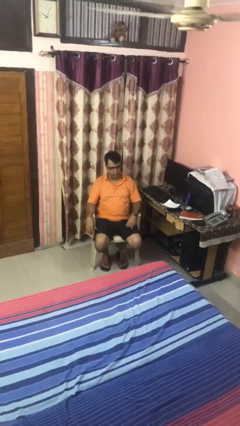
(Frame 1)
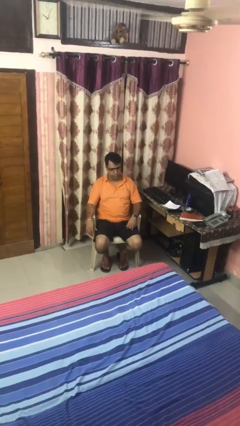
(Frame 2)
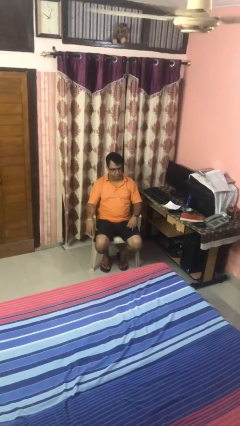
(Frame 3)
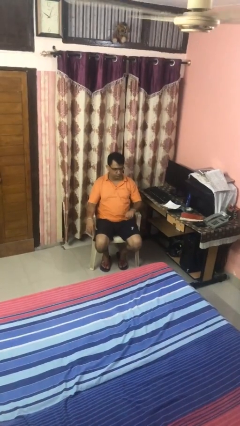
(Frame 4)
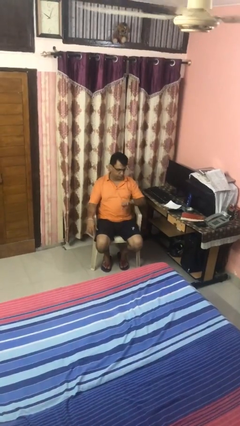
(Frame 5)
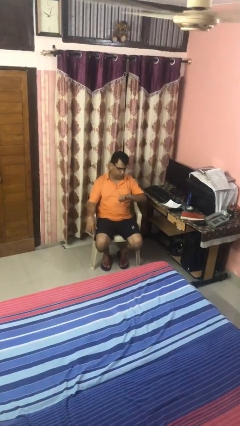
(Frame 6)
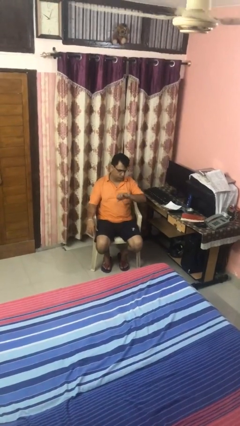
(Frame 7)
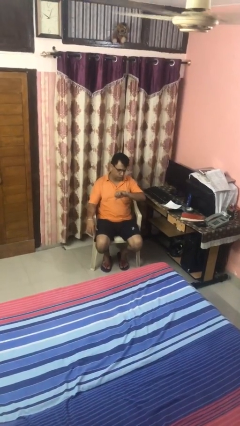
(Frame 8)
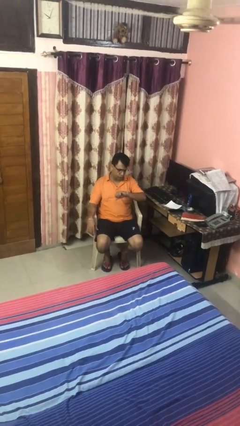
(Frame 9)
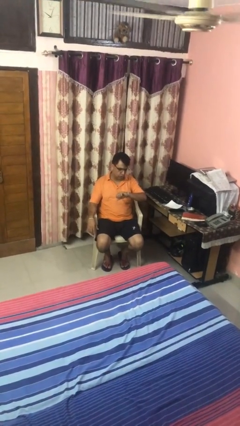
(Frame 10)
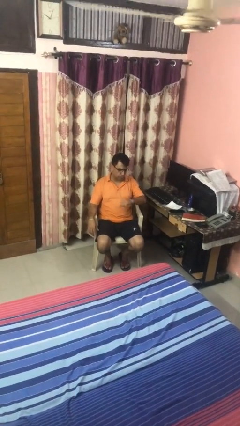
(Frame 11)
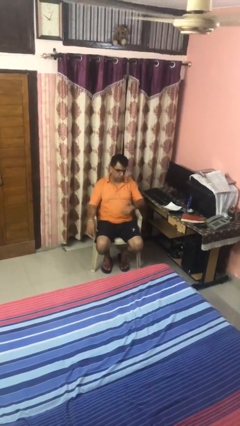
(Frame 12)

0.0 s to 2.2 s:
person looks at wristwatch

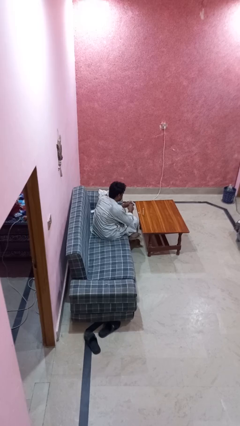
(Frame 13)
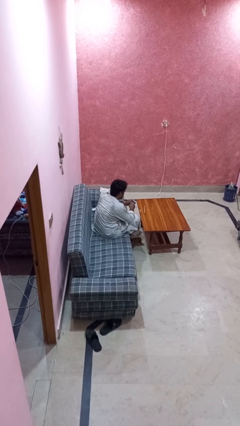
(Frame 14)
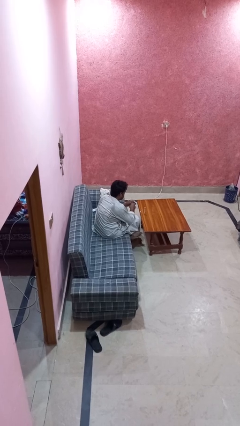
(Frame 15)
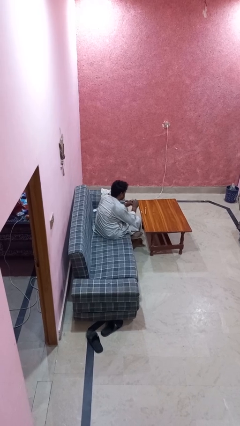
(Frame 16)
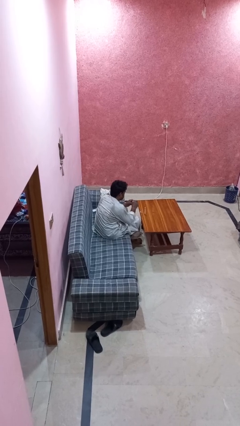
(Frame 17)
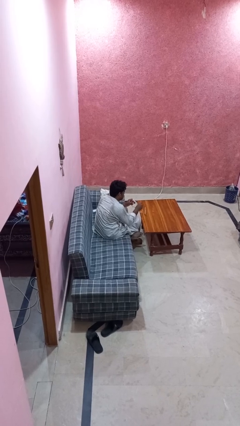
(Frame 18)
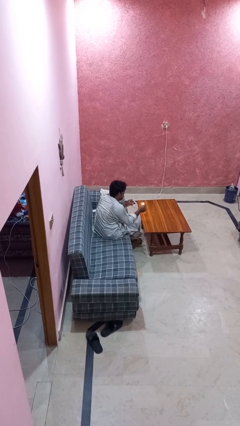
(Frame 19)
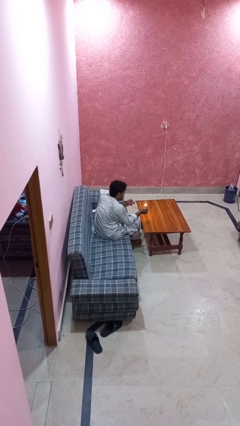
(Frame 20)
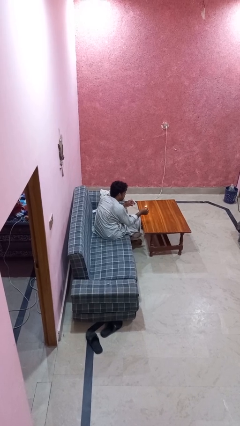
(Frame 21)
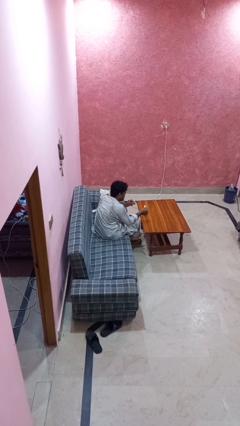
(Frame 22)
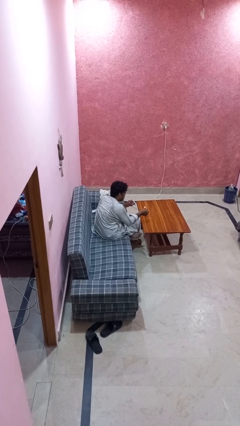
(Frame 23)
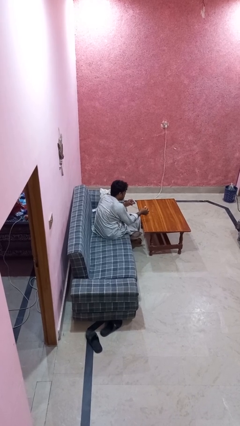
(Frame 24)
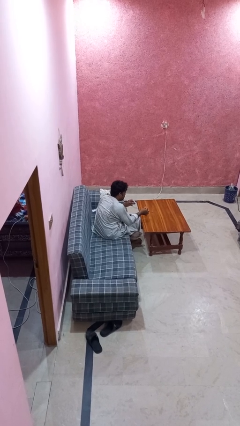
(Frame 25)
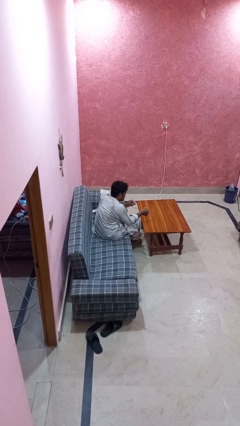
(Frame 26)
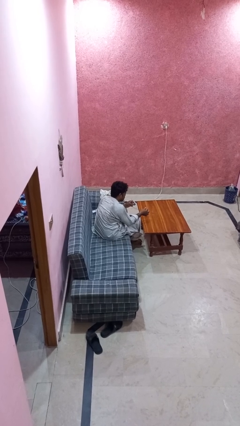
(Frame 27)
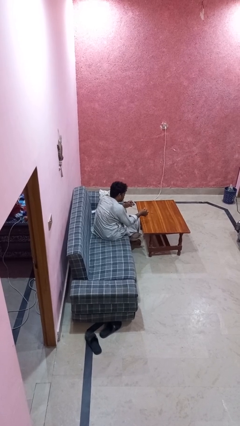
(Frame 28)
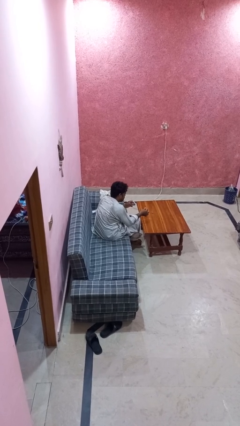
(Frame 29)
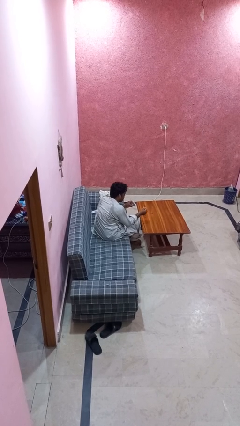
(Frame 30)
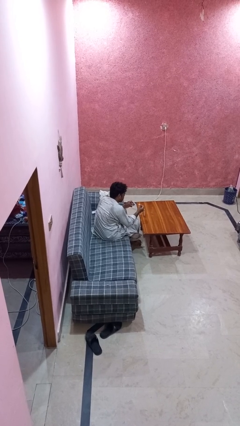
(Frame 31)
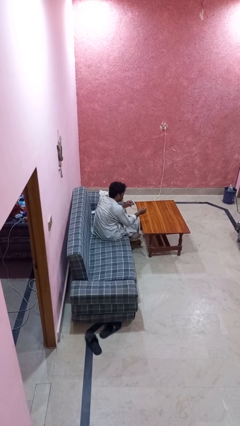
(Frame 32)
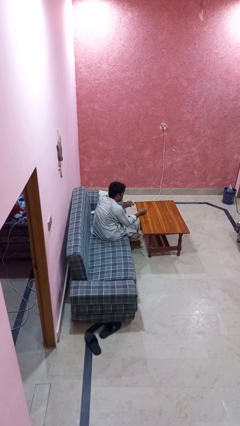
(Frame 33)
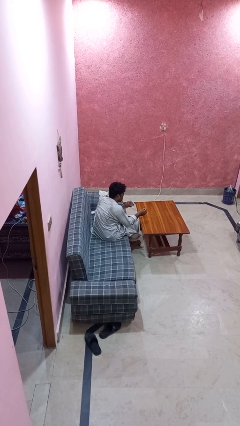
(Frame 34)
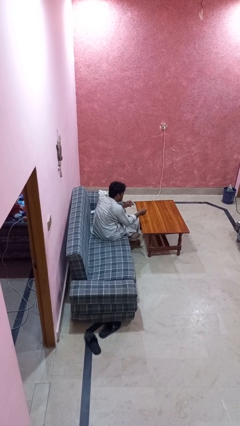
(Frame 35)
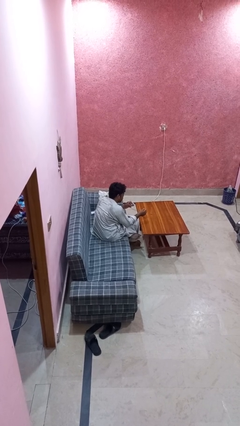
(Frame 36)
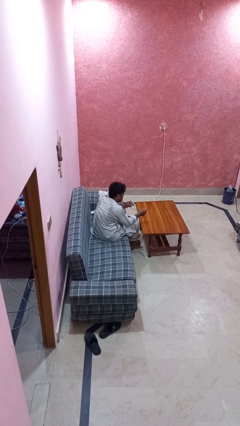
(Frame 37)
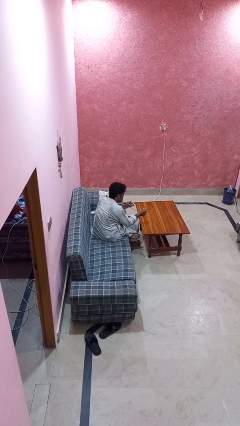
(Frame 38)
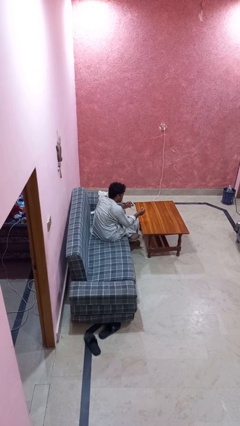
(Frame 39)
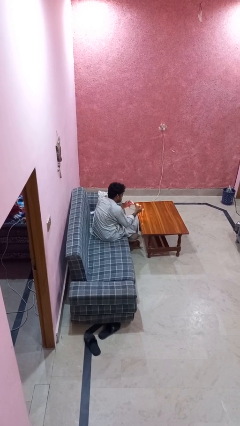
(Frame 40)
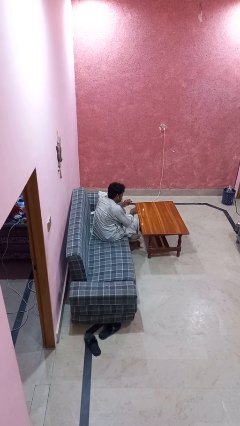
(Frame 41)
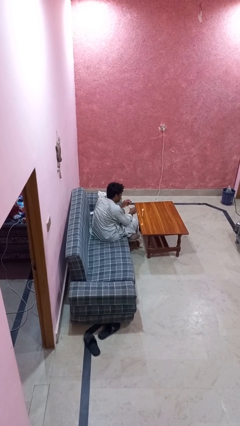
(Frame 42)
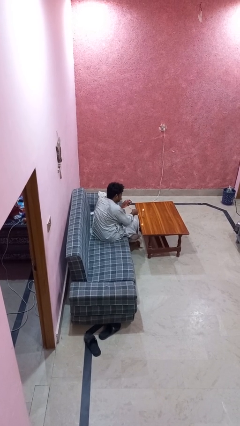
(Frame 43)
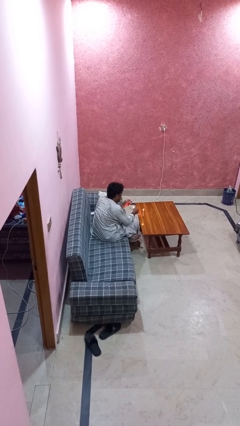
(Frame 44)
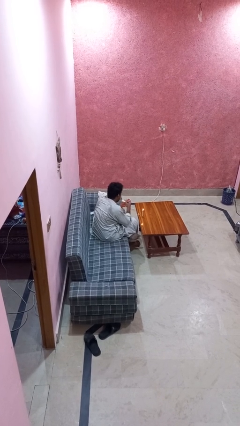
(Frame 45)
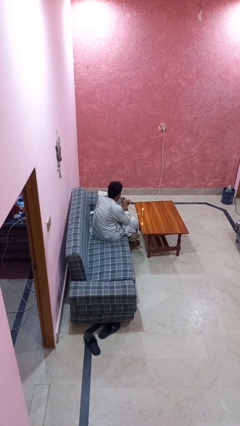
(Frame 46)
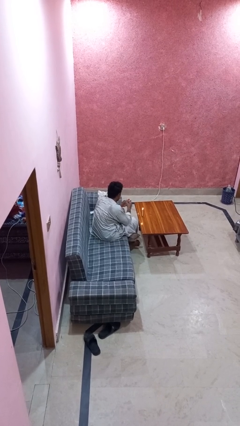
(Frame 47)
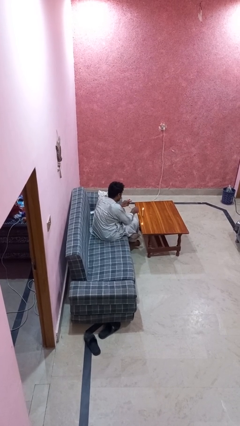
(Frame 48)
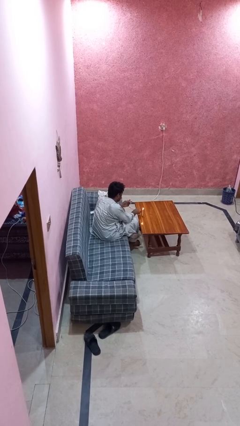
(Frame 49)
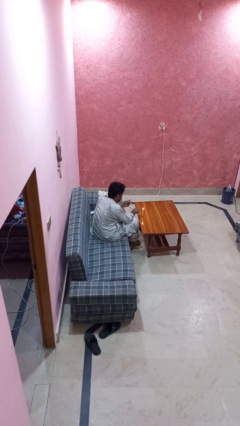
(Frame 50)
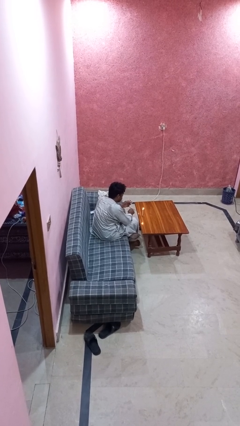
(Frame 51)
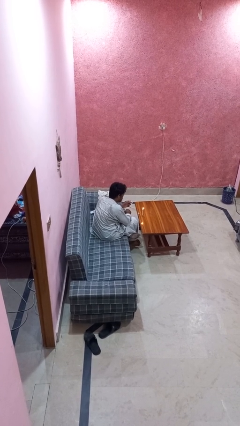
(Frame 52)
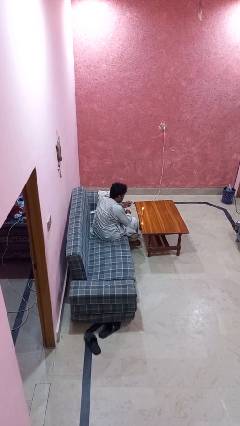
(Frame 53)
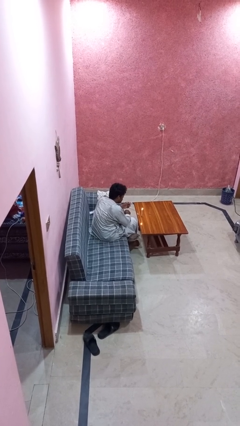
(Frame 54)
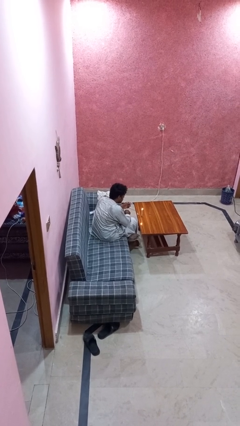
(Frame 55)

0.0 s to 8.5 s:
person lights candle

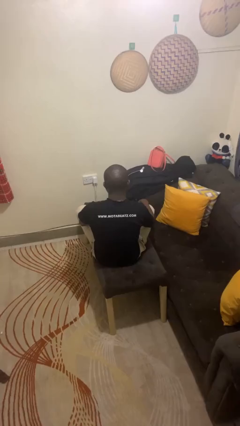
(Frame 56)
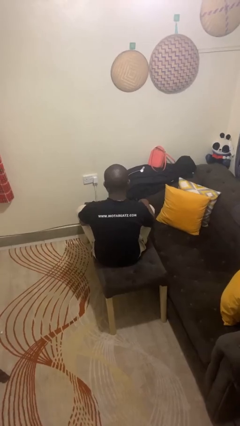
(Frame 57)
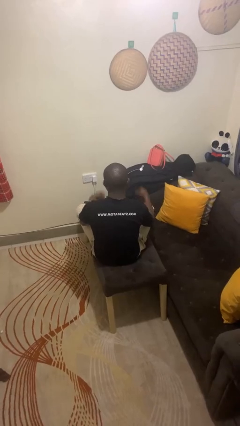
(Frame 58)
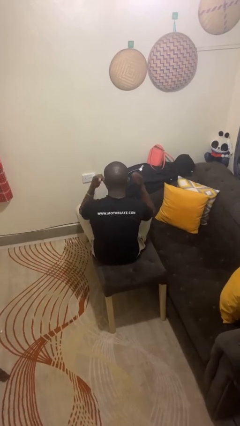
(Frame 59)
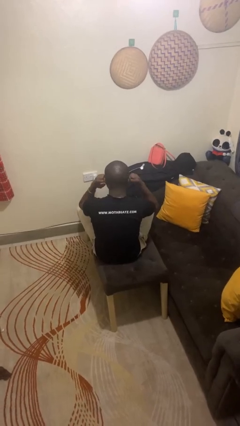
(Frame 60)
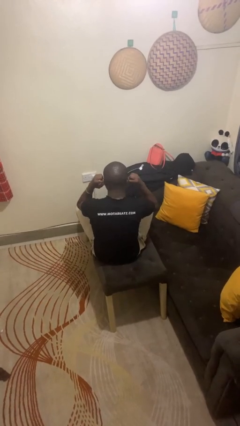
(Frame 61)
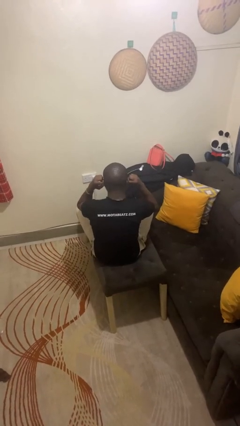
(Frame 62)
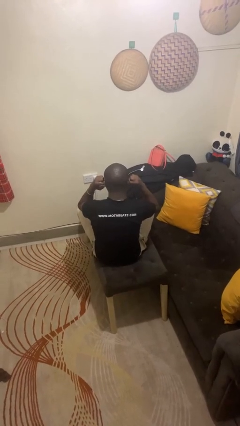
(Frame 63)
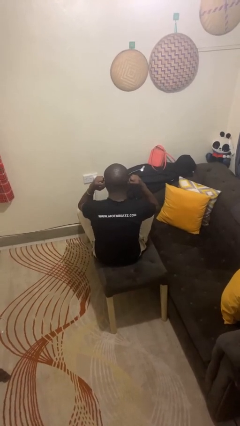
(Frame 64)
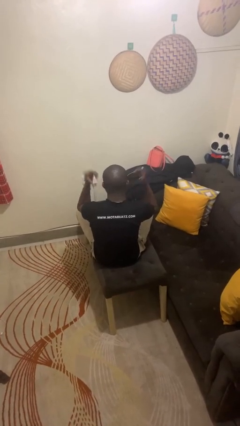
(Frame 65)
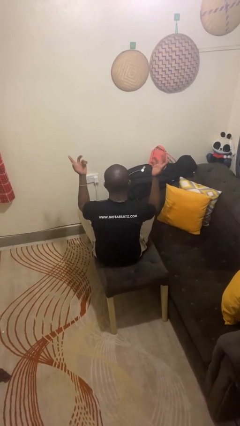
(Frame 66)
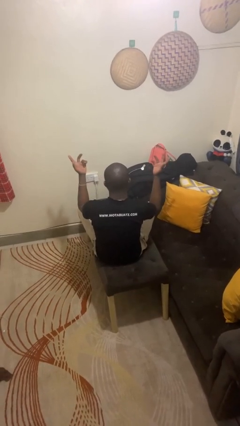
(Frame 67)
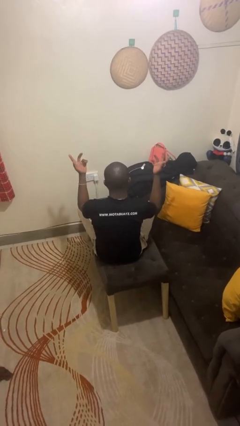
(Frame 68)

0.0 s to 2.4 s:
person puts fingers in ear

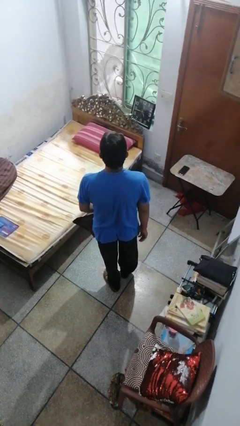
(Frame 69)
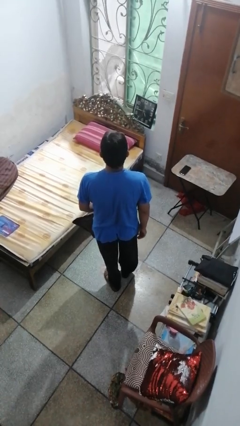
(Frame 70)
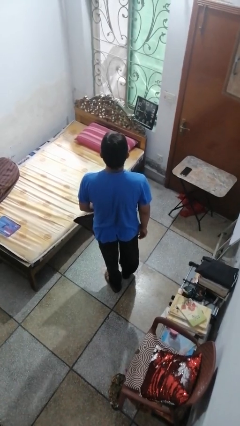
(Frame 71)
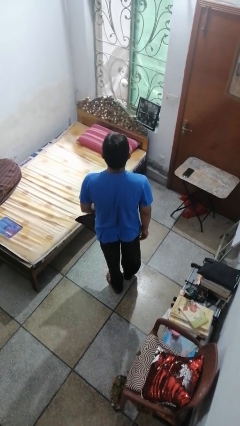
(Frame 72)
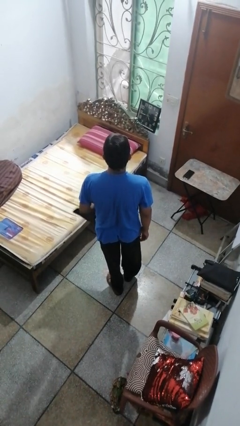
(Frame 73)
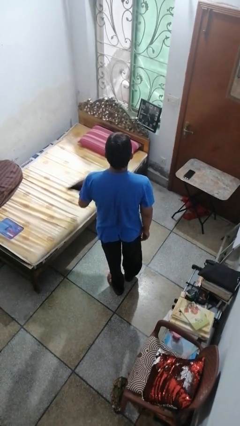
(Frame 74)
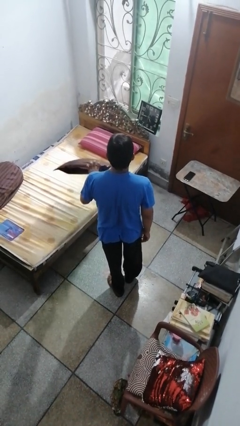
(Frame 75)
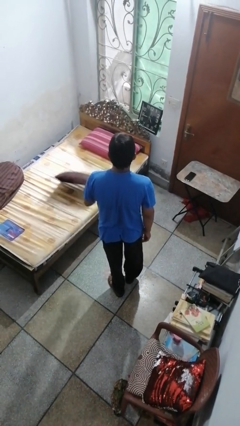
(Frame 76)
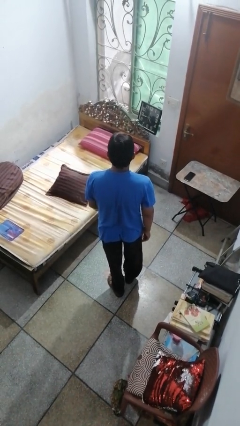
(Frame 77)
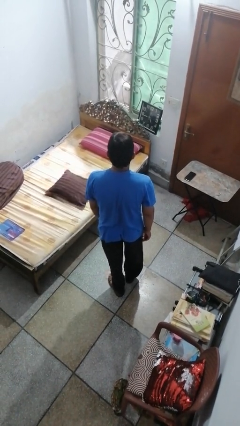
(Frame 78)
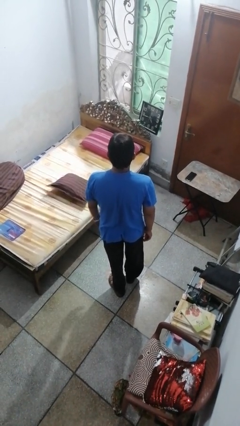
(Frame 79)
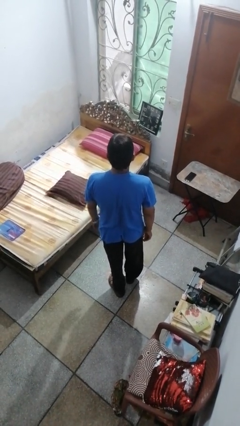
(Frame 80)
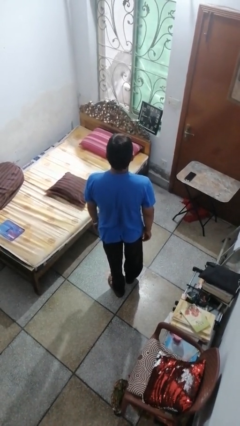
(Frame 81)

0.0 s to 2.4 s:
person throws object on bed

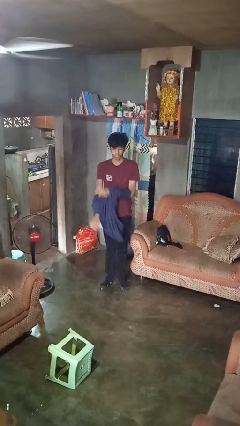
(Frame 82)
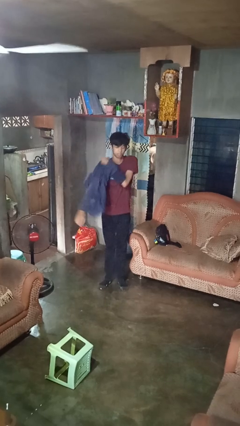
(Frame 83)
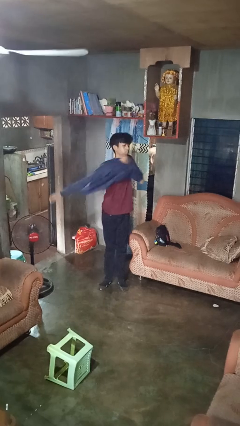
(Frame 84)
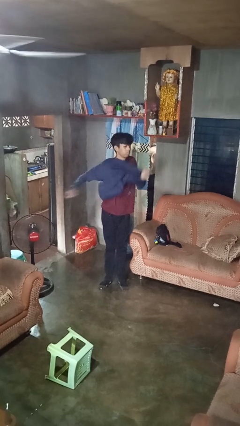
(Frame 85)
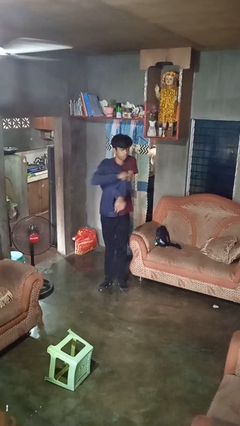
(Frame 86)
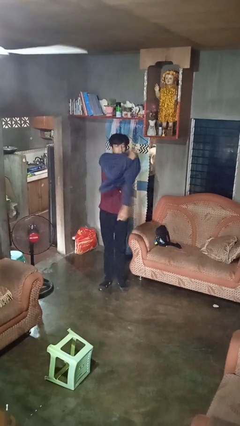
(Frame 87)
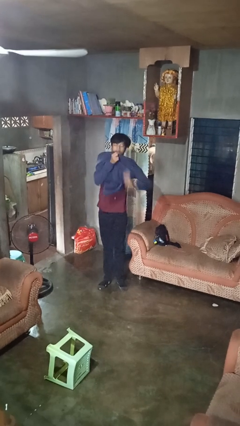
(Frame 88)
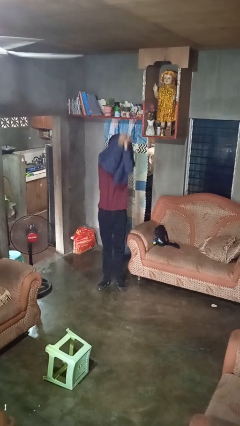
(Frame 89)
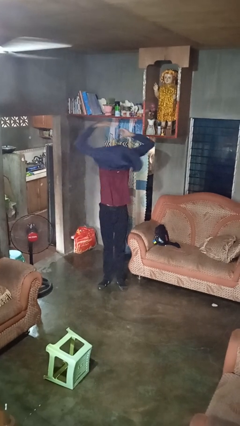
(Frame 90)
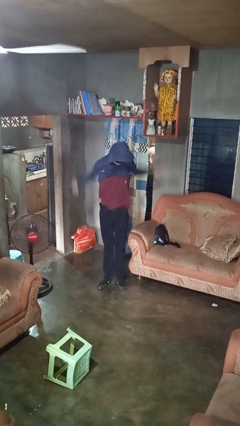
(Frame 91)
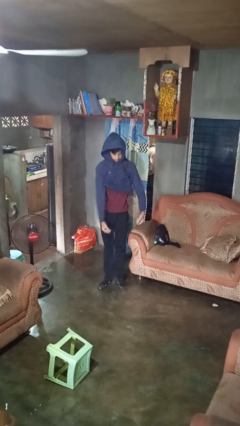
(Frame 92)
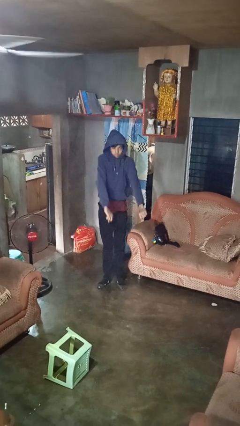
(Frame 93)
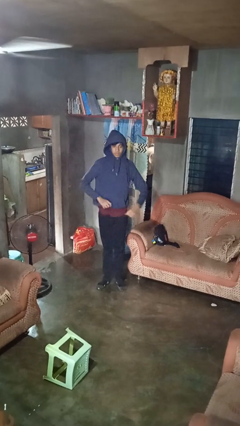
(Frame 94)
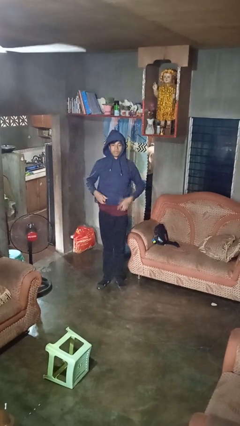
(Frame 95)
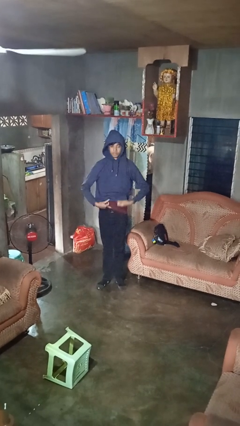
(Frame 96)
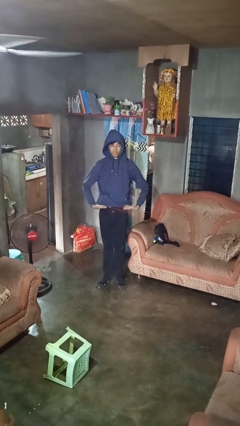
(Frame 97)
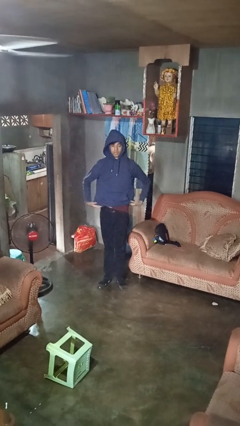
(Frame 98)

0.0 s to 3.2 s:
person puts on hoodie
